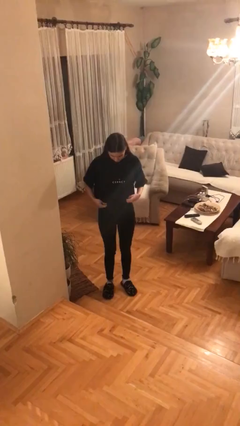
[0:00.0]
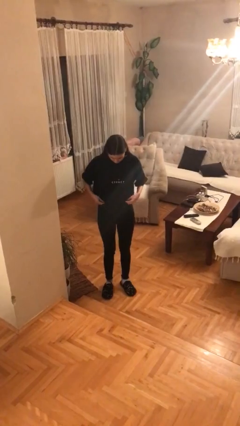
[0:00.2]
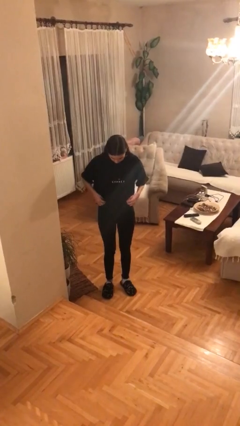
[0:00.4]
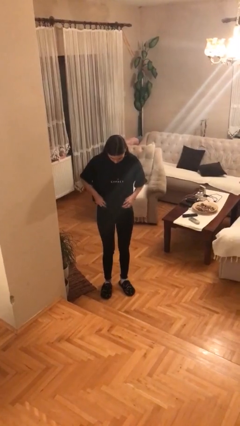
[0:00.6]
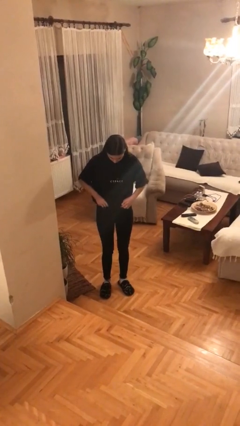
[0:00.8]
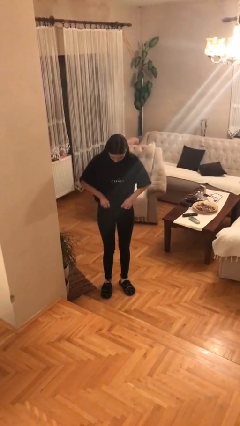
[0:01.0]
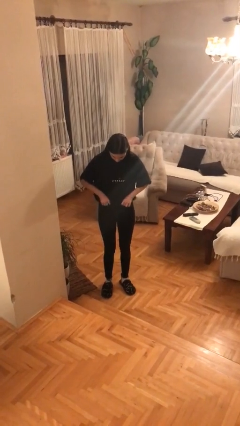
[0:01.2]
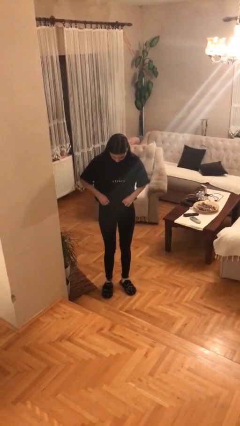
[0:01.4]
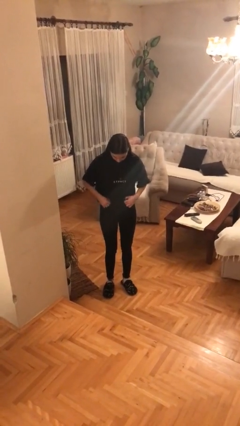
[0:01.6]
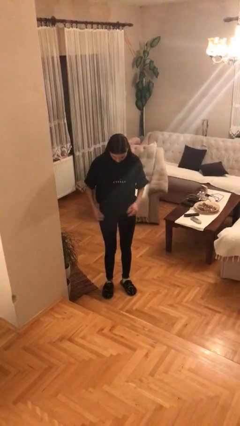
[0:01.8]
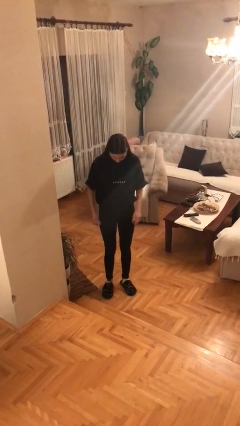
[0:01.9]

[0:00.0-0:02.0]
person tucks in shirt

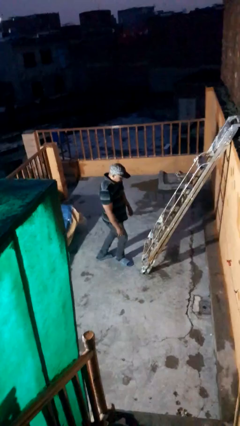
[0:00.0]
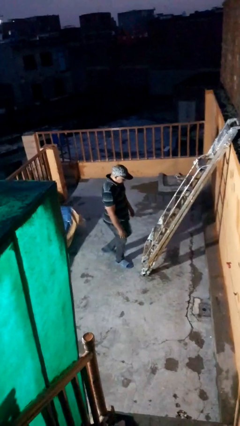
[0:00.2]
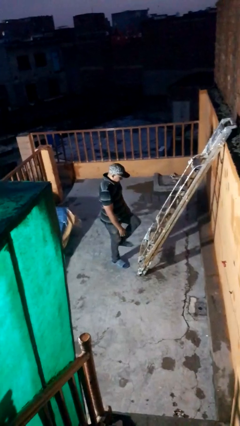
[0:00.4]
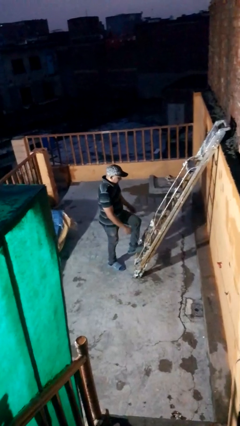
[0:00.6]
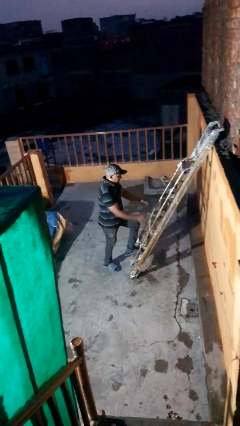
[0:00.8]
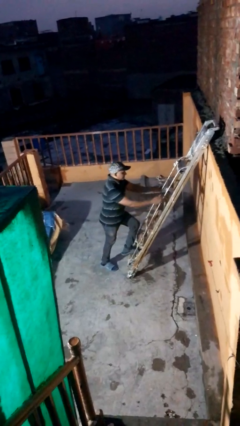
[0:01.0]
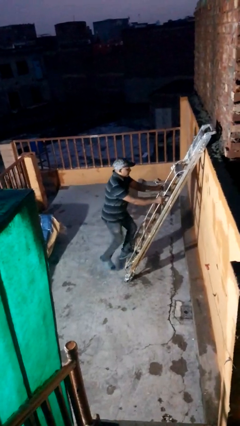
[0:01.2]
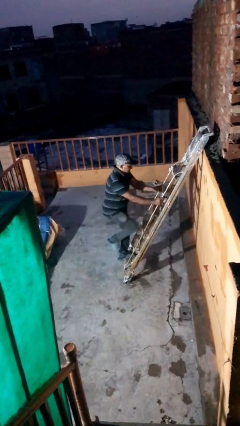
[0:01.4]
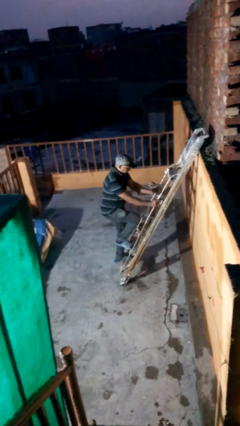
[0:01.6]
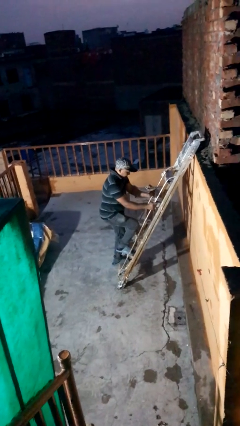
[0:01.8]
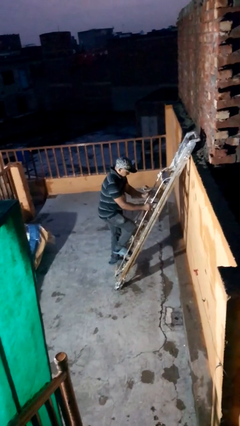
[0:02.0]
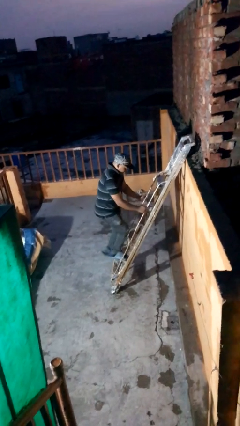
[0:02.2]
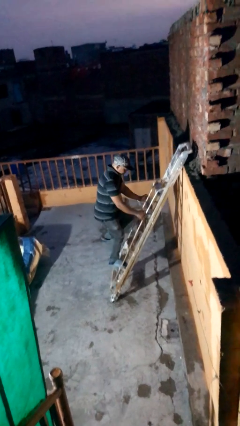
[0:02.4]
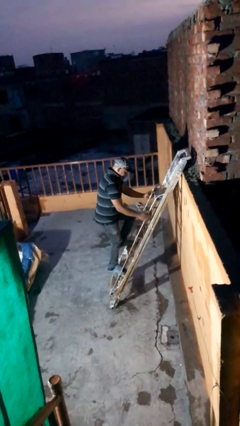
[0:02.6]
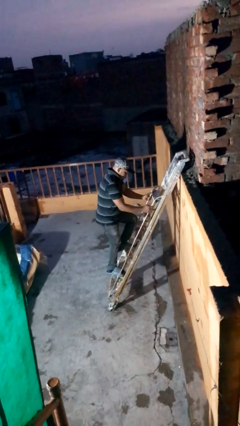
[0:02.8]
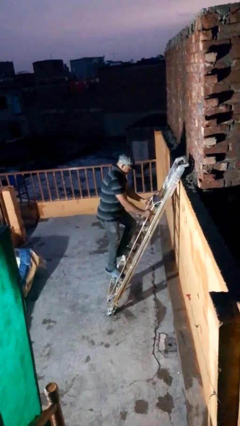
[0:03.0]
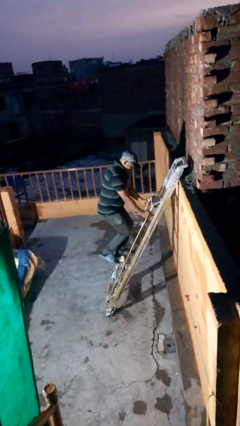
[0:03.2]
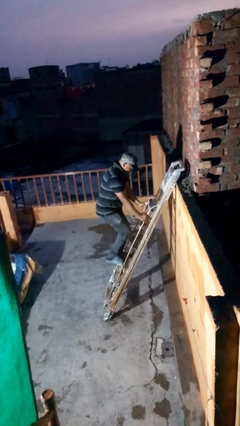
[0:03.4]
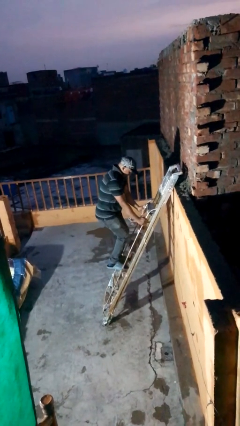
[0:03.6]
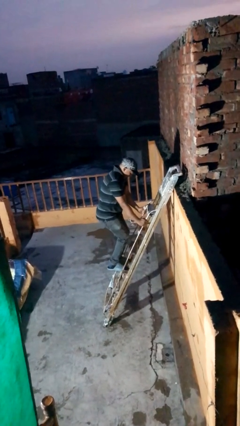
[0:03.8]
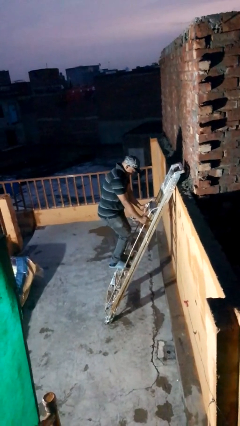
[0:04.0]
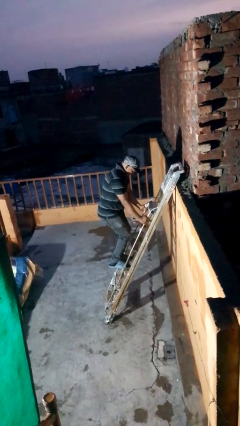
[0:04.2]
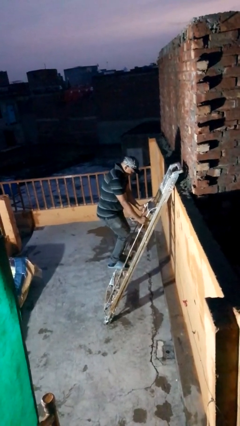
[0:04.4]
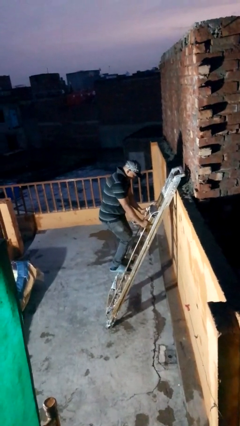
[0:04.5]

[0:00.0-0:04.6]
person climbs up ladder

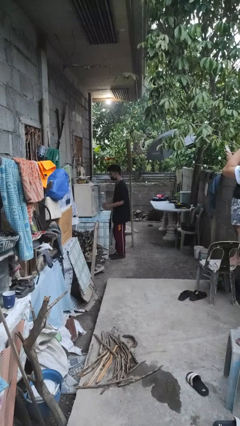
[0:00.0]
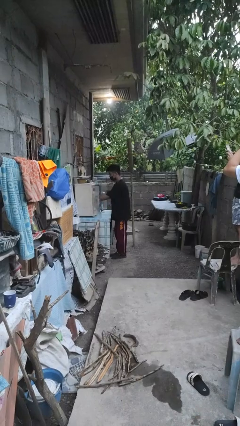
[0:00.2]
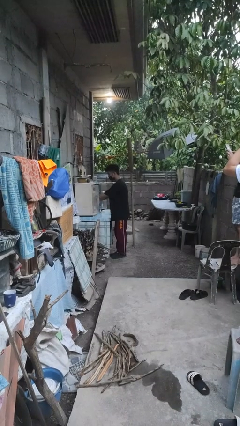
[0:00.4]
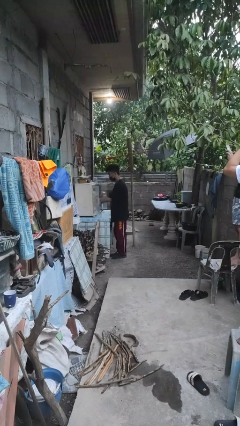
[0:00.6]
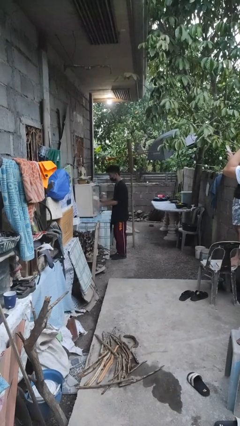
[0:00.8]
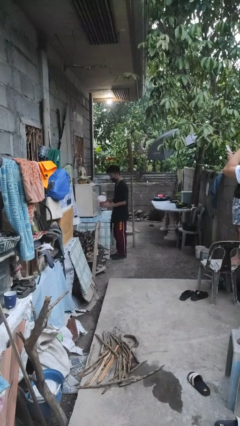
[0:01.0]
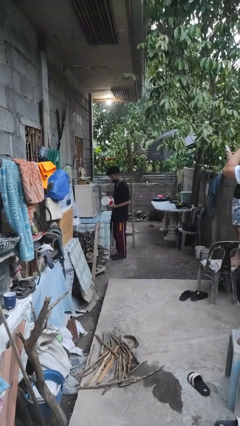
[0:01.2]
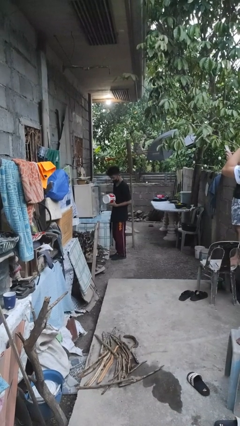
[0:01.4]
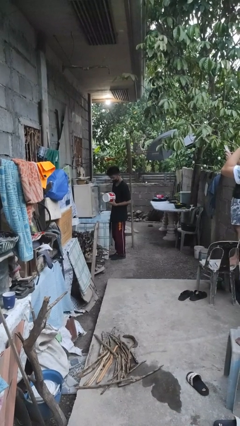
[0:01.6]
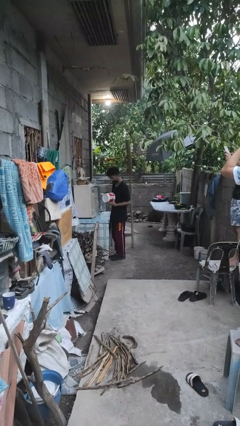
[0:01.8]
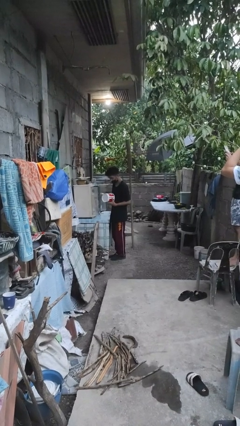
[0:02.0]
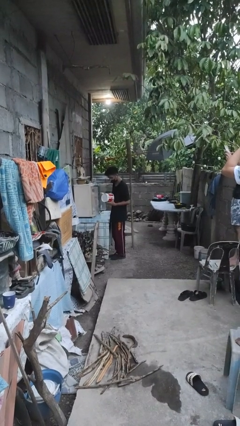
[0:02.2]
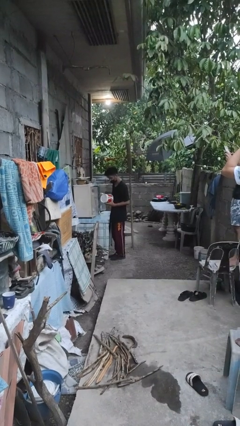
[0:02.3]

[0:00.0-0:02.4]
person picks up object from cabinet

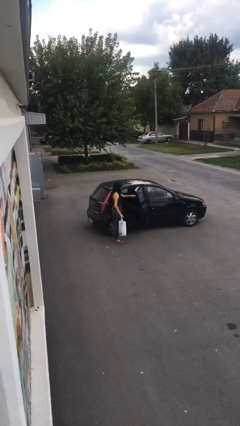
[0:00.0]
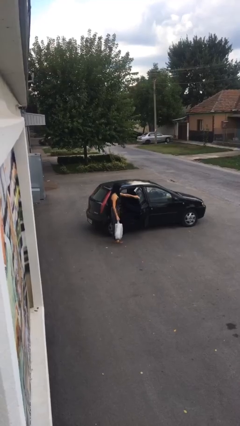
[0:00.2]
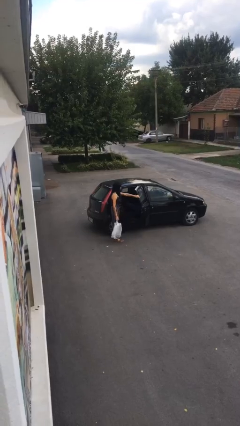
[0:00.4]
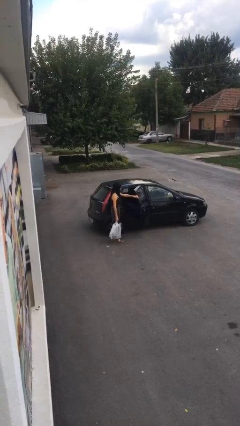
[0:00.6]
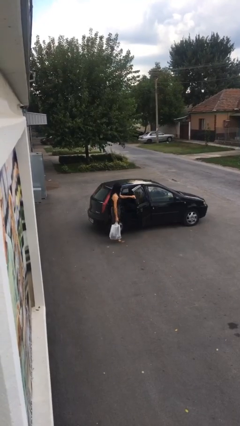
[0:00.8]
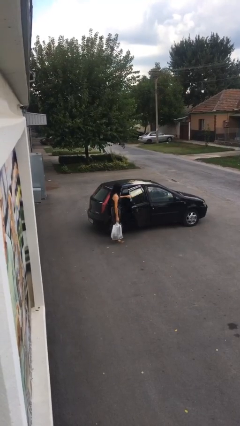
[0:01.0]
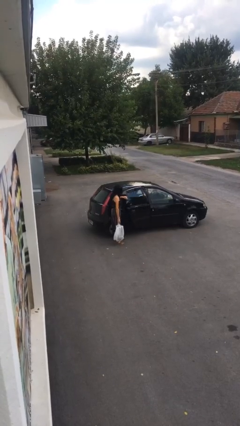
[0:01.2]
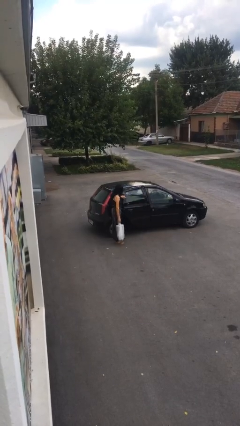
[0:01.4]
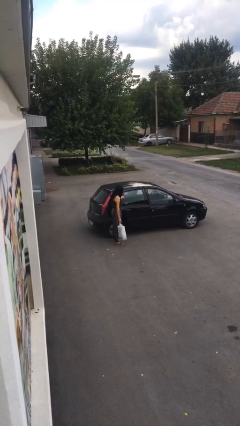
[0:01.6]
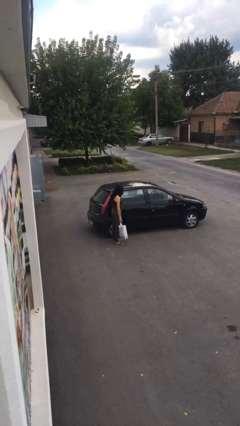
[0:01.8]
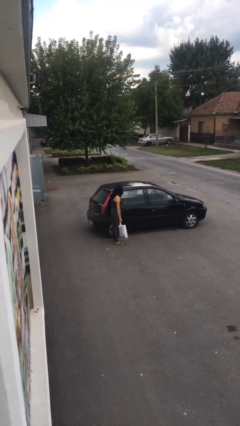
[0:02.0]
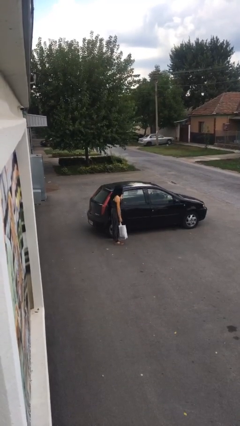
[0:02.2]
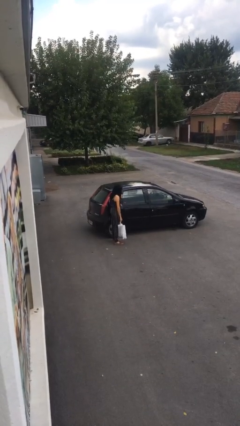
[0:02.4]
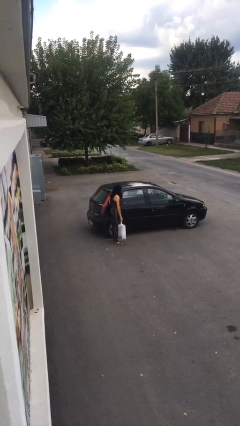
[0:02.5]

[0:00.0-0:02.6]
person closes car door

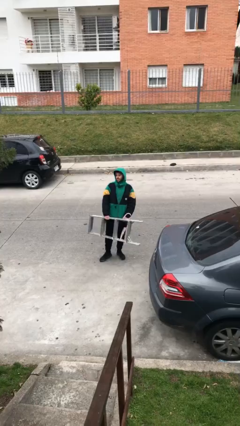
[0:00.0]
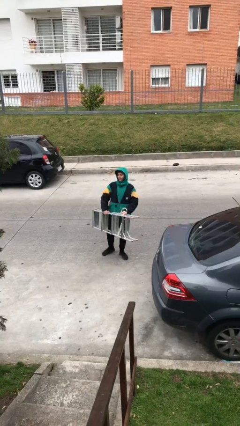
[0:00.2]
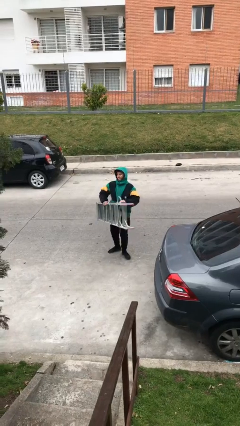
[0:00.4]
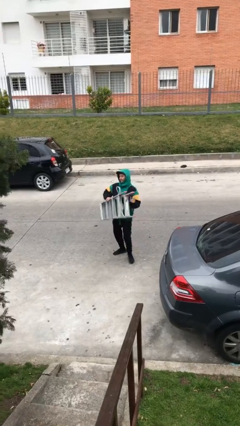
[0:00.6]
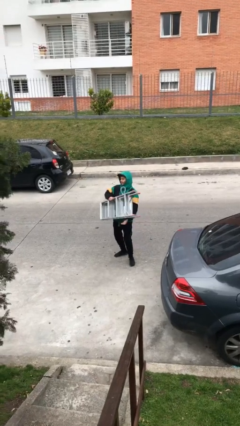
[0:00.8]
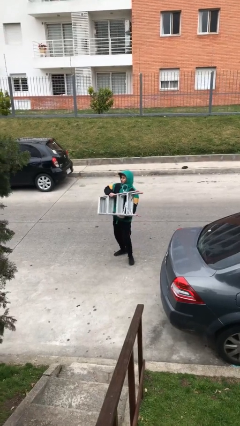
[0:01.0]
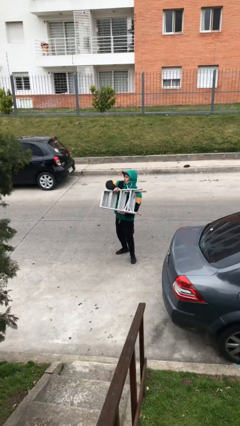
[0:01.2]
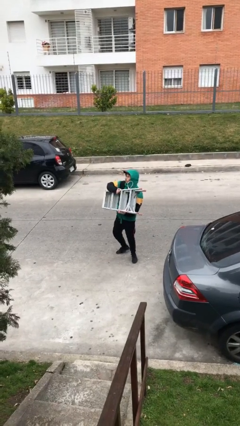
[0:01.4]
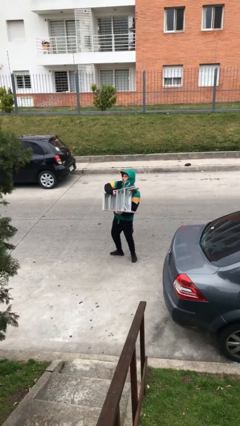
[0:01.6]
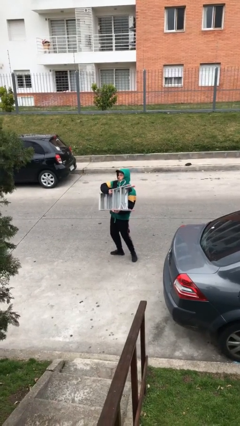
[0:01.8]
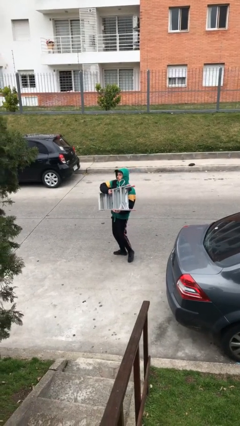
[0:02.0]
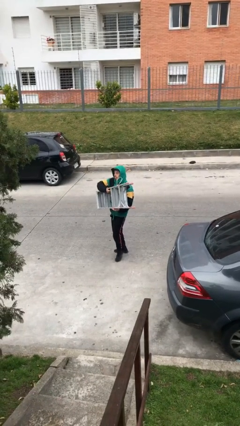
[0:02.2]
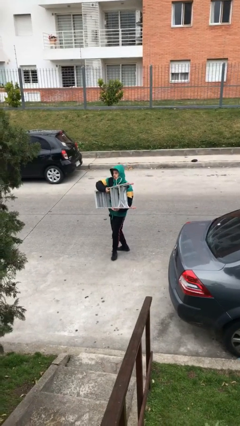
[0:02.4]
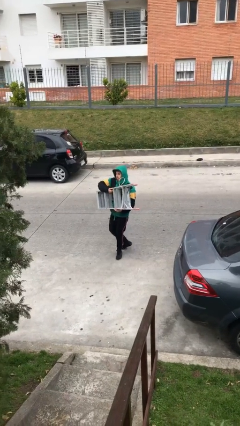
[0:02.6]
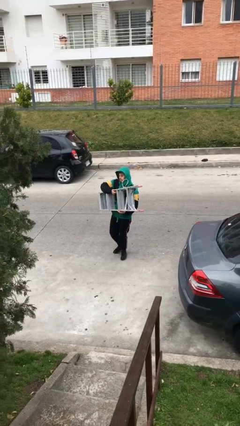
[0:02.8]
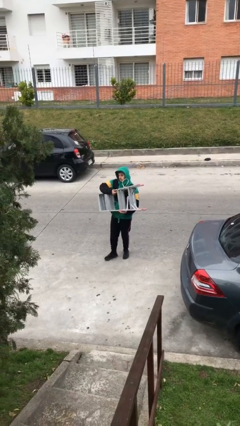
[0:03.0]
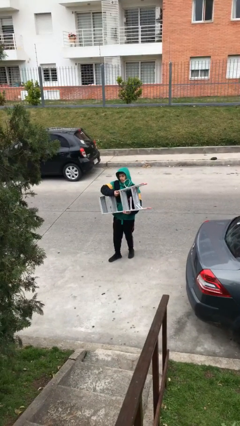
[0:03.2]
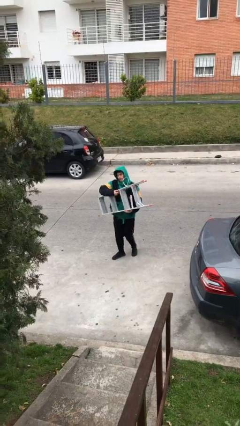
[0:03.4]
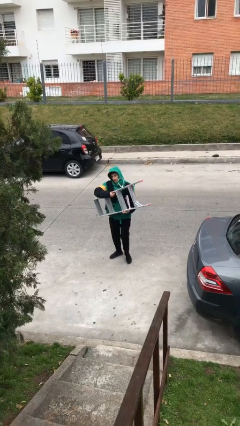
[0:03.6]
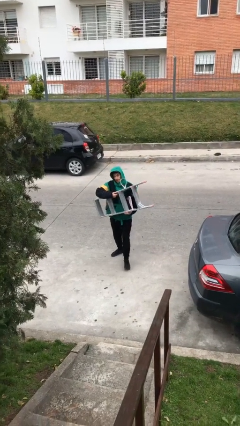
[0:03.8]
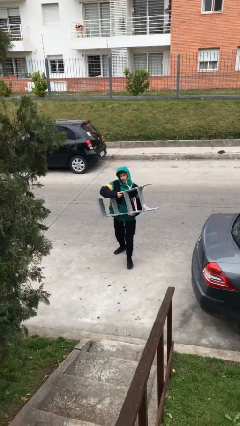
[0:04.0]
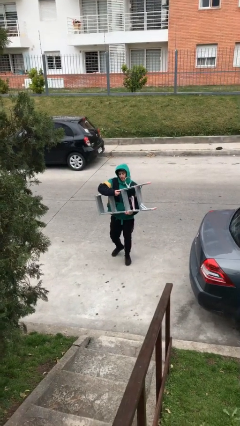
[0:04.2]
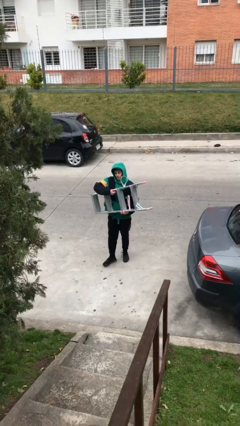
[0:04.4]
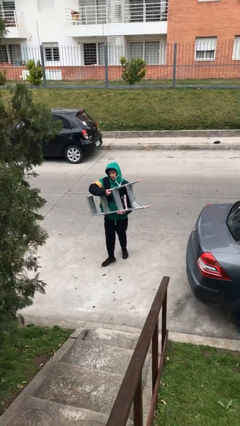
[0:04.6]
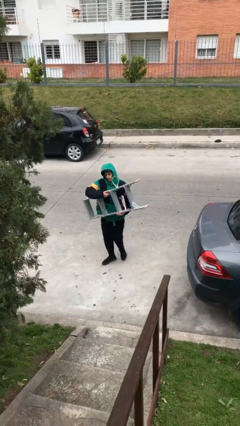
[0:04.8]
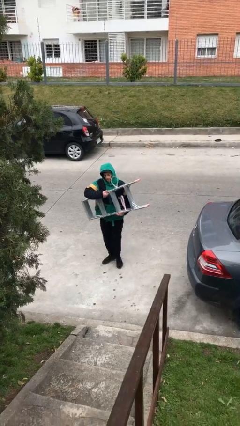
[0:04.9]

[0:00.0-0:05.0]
person carries heavy object

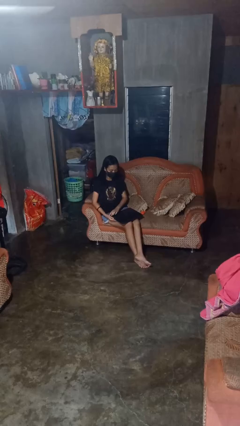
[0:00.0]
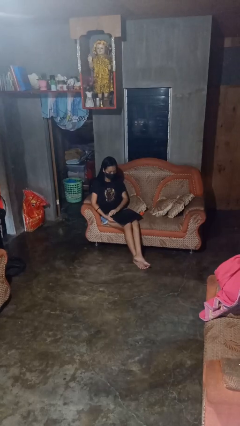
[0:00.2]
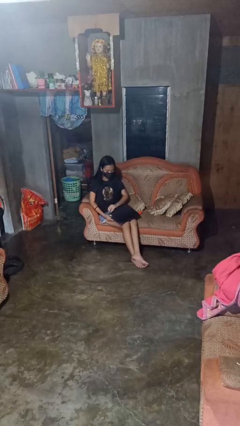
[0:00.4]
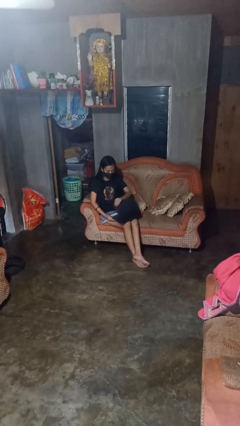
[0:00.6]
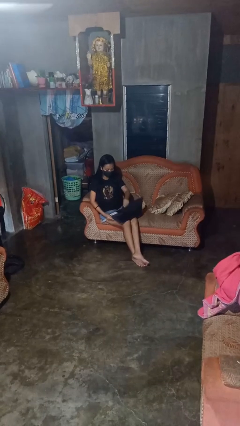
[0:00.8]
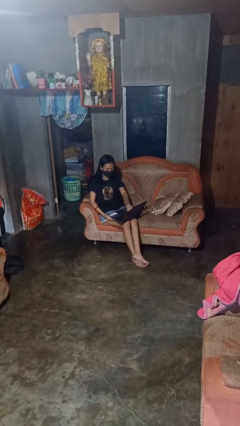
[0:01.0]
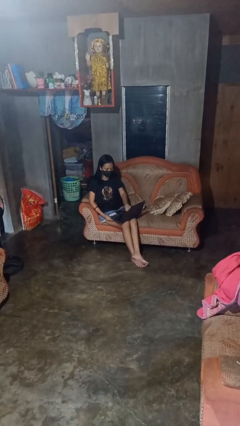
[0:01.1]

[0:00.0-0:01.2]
person opens laptop
